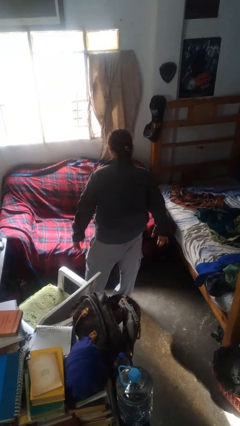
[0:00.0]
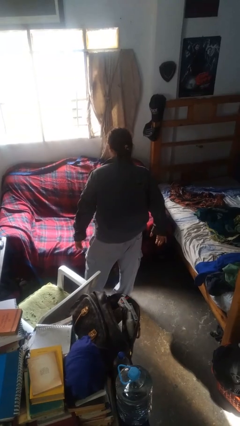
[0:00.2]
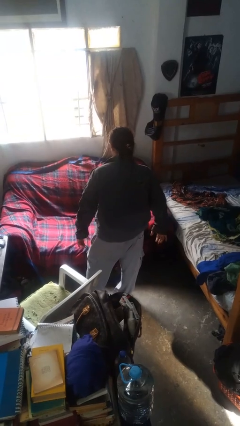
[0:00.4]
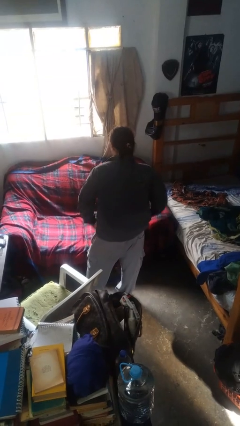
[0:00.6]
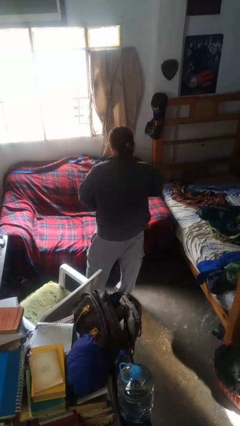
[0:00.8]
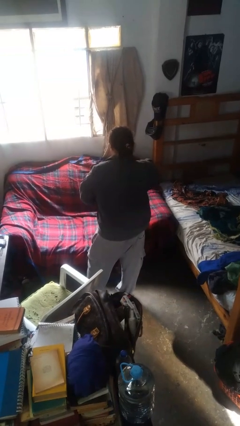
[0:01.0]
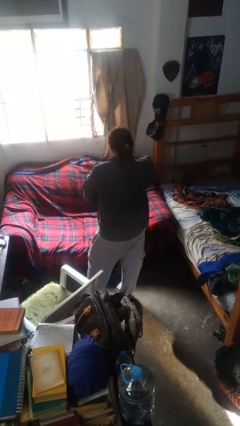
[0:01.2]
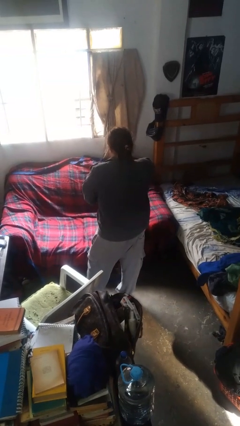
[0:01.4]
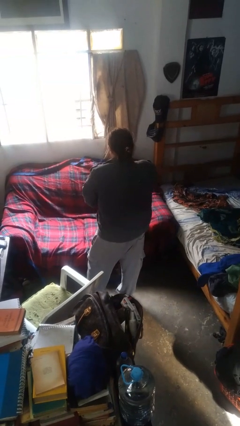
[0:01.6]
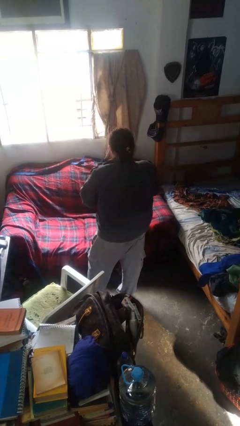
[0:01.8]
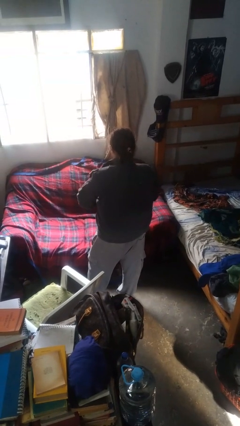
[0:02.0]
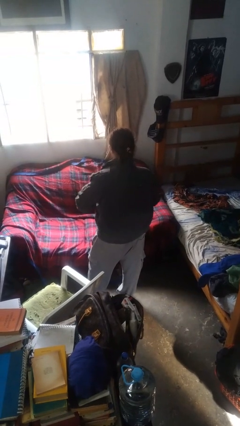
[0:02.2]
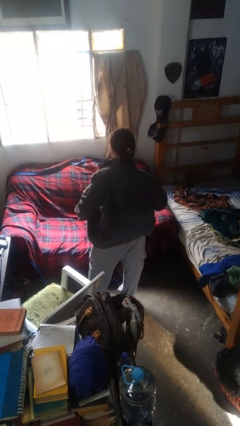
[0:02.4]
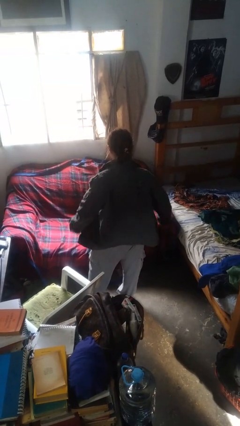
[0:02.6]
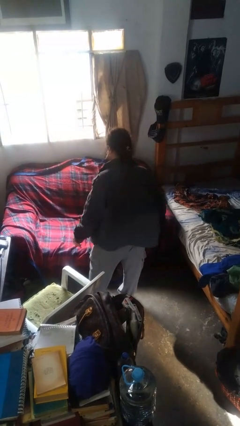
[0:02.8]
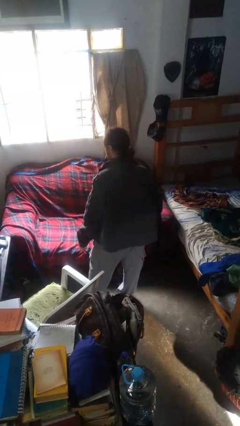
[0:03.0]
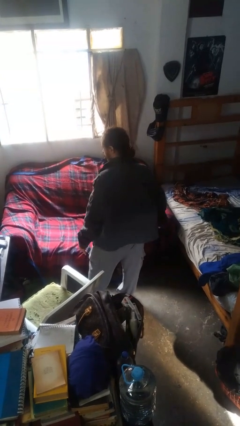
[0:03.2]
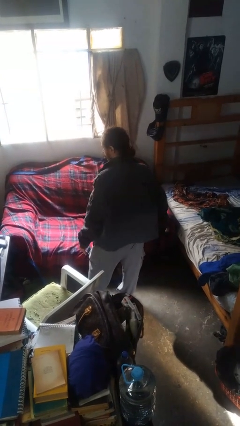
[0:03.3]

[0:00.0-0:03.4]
person unzips jacket

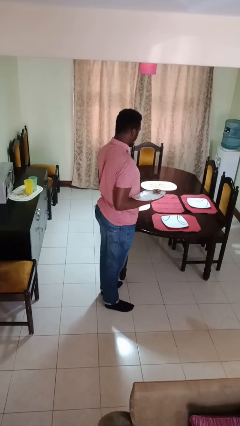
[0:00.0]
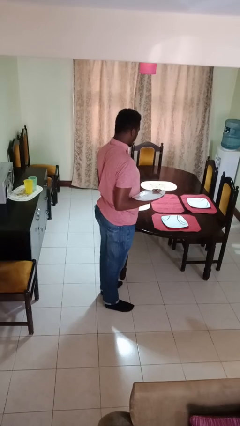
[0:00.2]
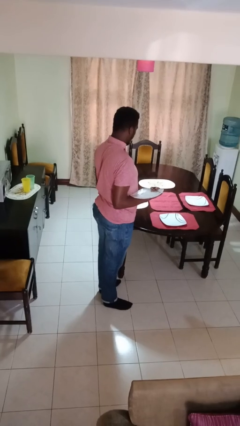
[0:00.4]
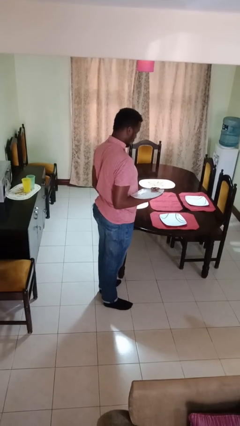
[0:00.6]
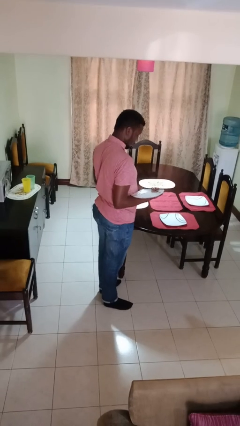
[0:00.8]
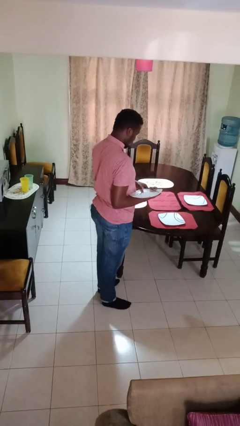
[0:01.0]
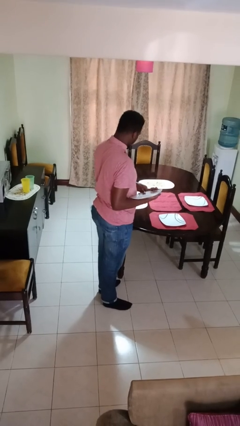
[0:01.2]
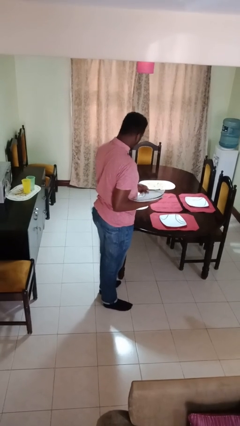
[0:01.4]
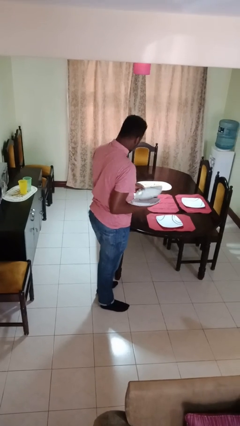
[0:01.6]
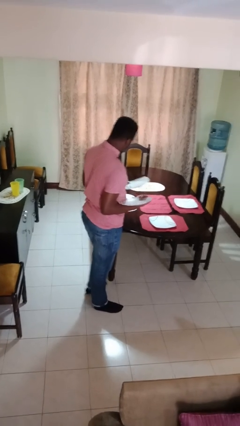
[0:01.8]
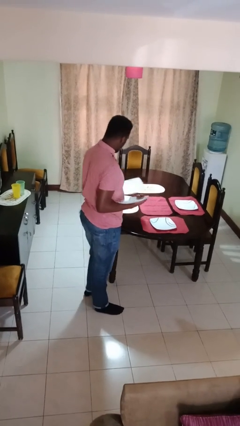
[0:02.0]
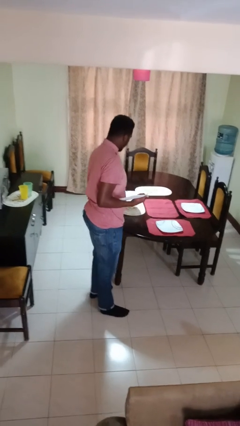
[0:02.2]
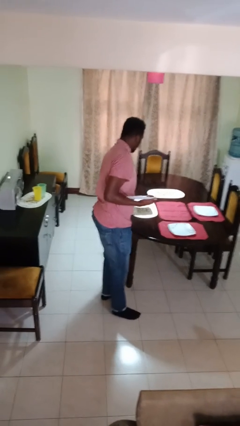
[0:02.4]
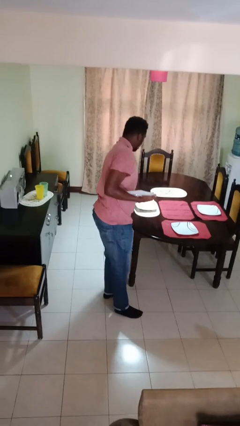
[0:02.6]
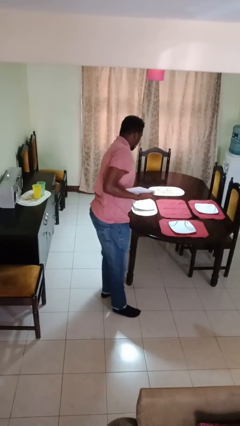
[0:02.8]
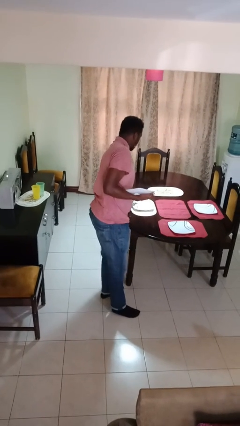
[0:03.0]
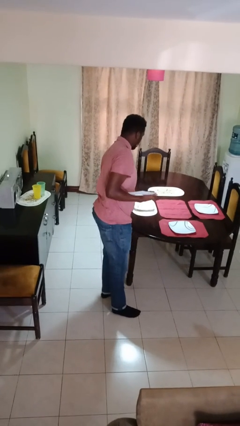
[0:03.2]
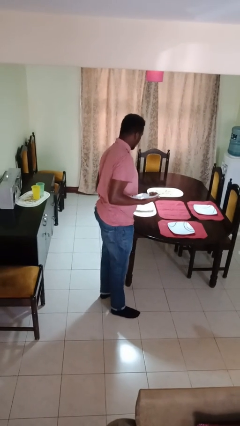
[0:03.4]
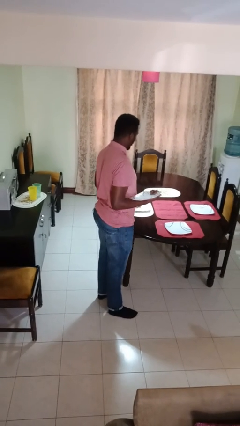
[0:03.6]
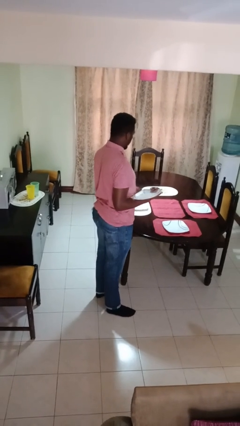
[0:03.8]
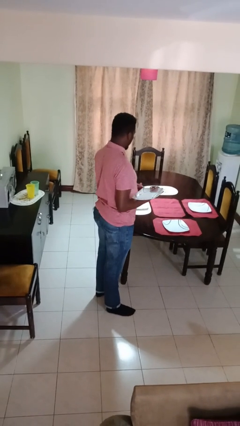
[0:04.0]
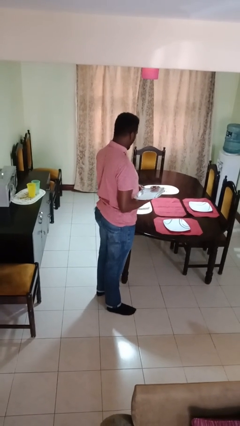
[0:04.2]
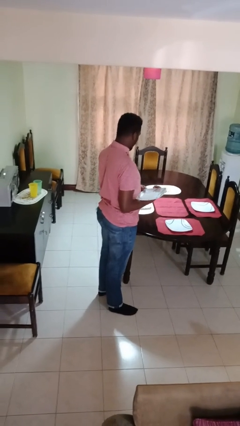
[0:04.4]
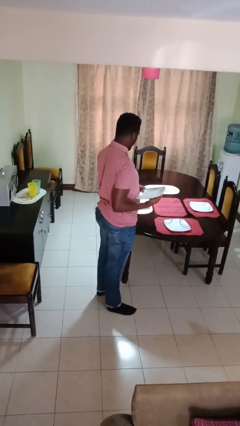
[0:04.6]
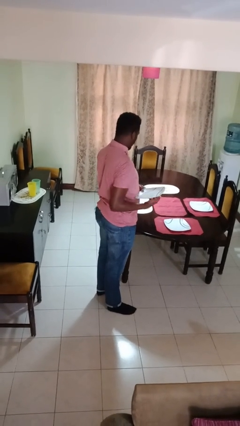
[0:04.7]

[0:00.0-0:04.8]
person sets table

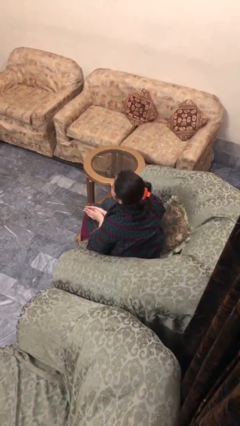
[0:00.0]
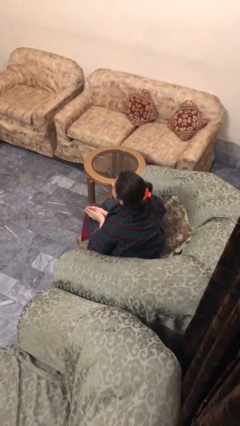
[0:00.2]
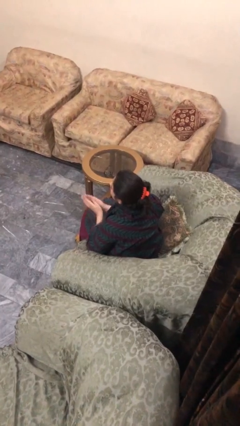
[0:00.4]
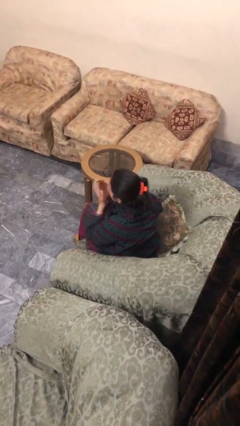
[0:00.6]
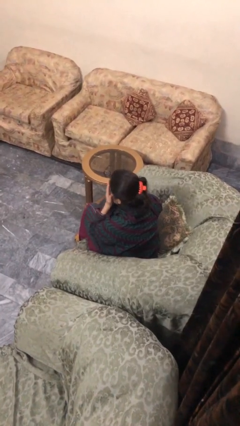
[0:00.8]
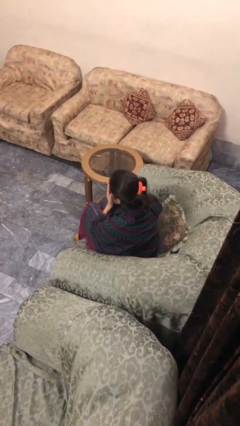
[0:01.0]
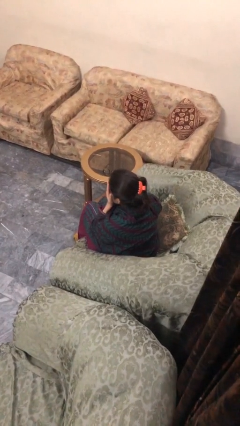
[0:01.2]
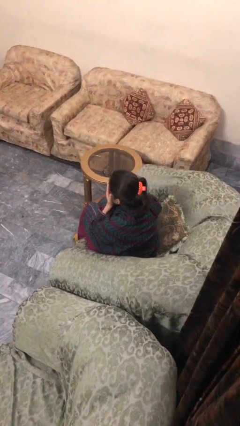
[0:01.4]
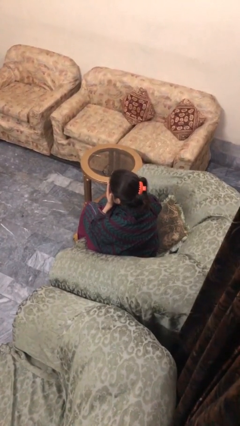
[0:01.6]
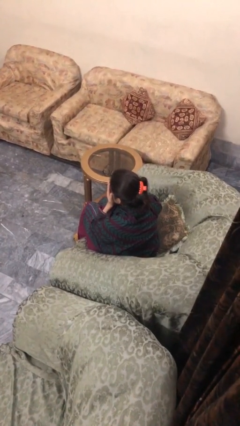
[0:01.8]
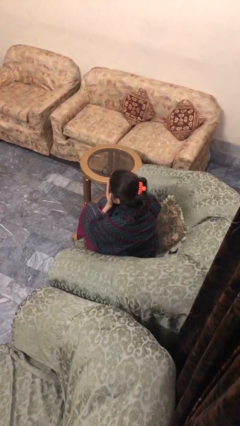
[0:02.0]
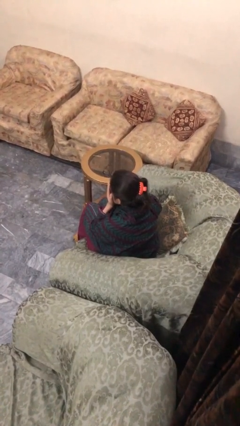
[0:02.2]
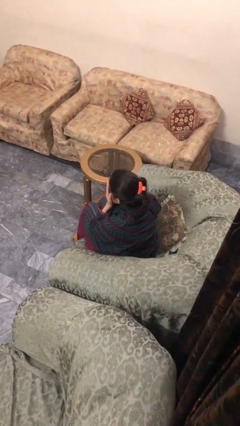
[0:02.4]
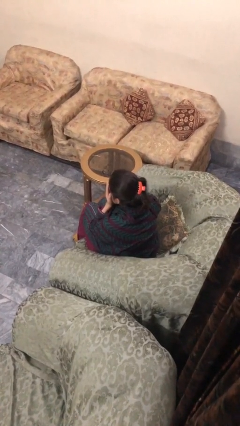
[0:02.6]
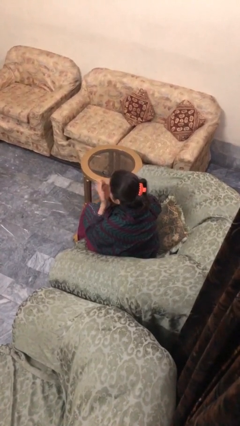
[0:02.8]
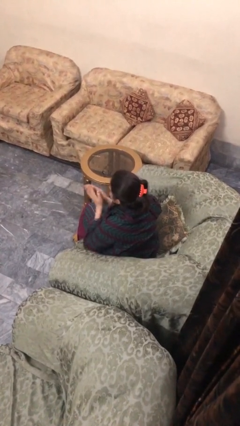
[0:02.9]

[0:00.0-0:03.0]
person covers face with hands

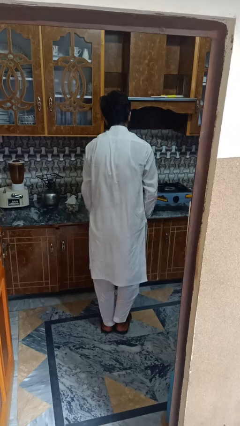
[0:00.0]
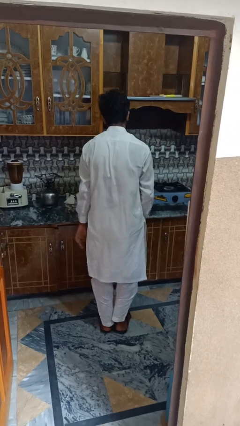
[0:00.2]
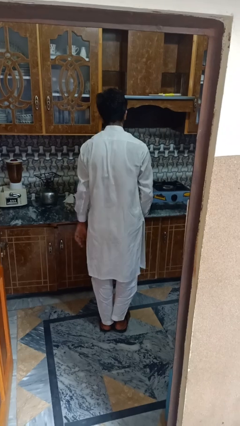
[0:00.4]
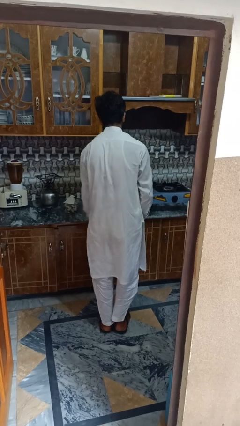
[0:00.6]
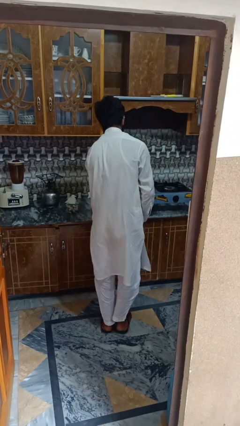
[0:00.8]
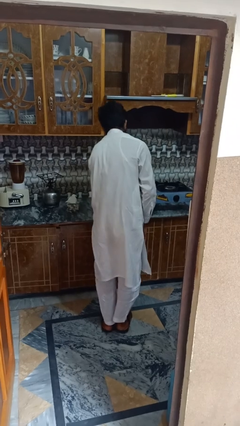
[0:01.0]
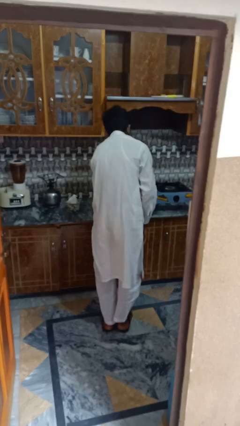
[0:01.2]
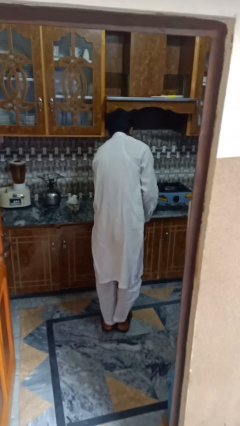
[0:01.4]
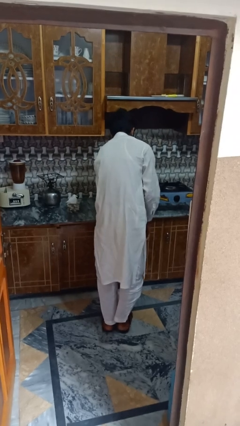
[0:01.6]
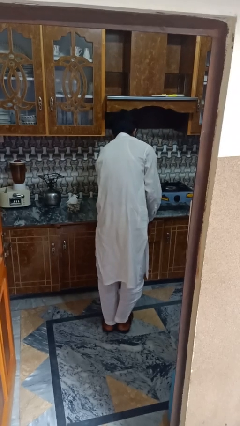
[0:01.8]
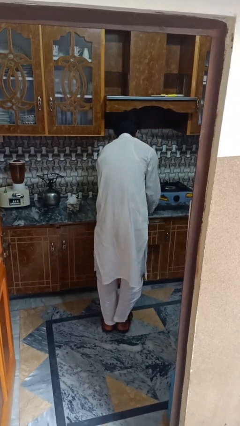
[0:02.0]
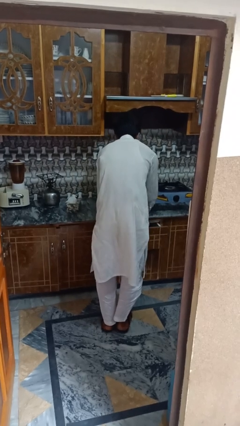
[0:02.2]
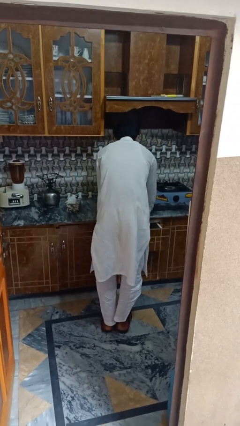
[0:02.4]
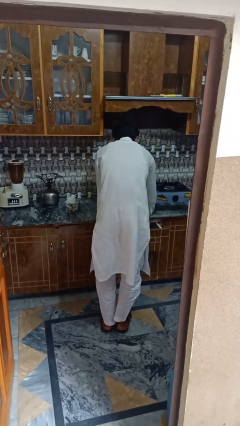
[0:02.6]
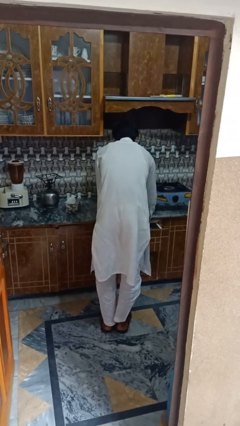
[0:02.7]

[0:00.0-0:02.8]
person searches in kitchen drawer

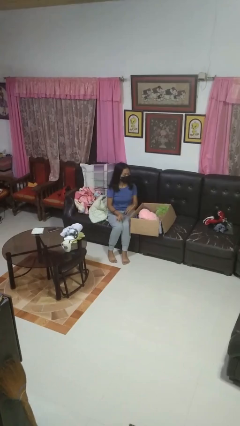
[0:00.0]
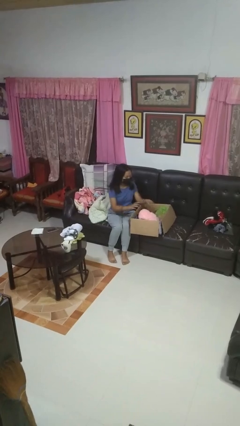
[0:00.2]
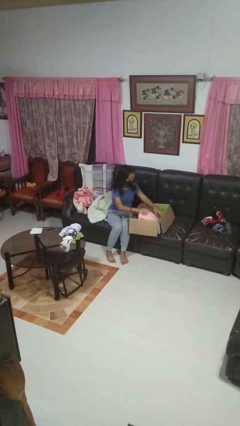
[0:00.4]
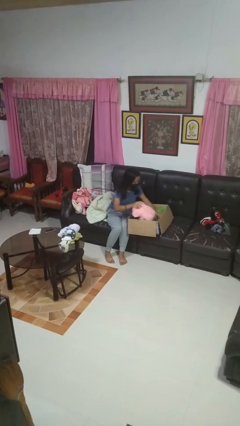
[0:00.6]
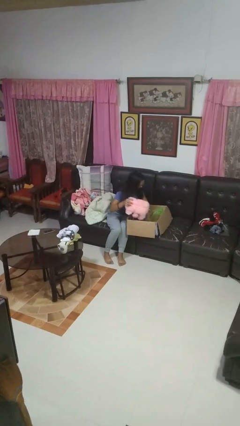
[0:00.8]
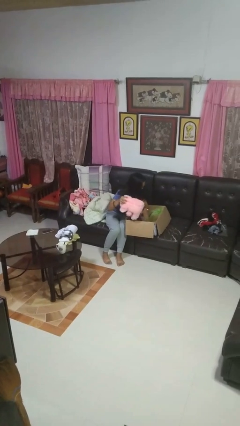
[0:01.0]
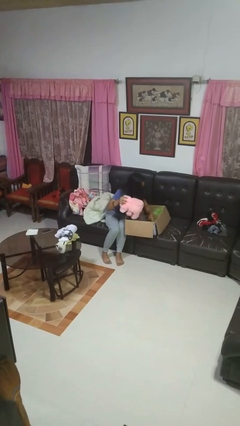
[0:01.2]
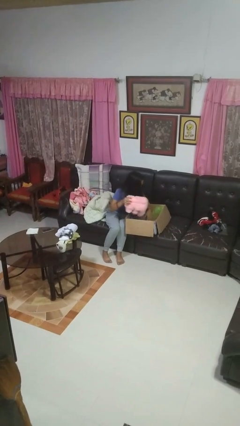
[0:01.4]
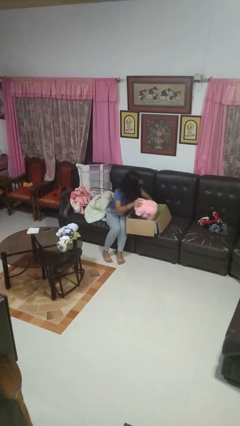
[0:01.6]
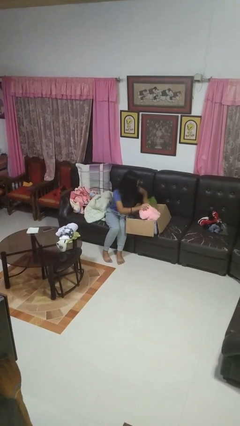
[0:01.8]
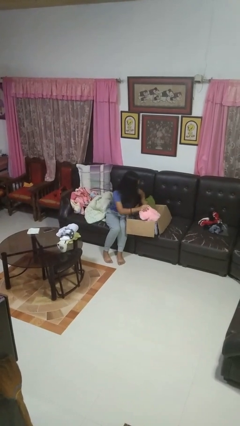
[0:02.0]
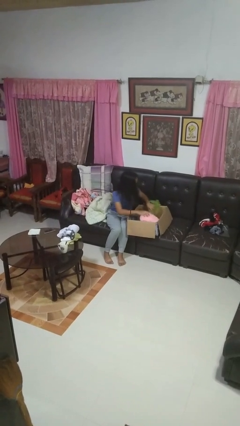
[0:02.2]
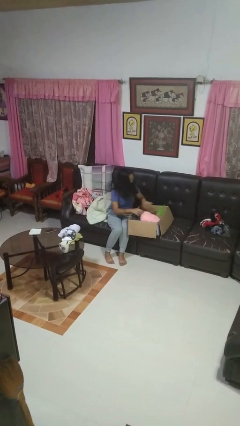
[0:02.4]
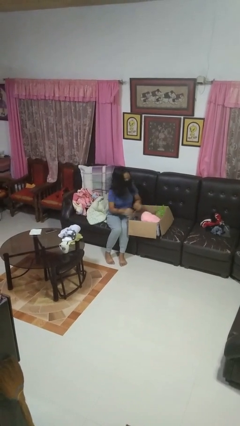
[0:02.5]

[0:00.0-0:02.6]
person searches in box

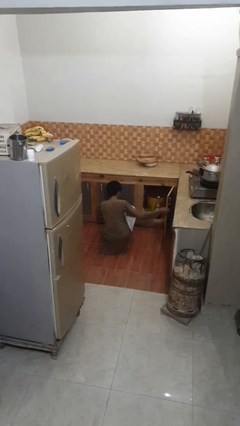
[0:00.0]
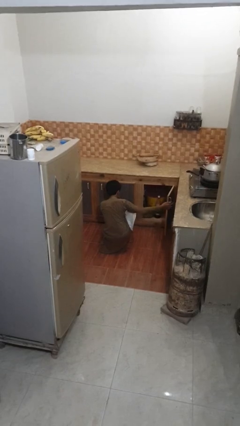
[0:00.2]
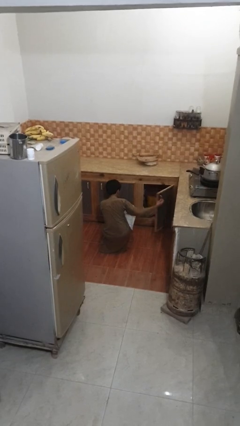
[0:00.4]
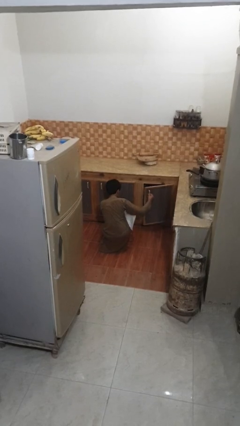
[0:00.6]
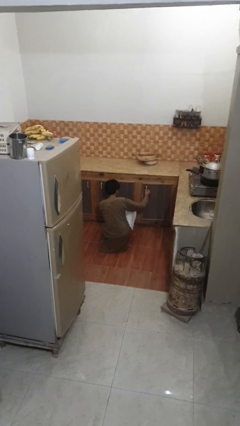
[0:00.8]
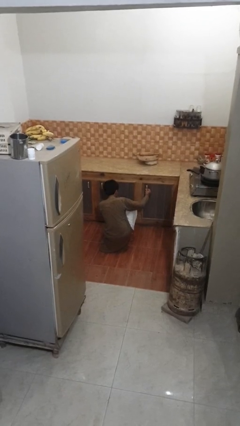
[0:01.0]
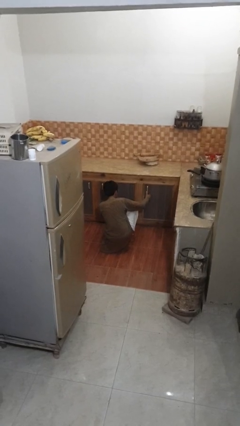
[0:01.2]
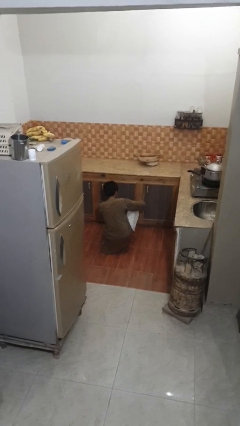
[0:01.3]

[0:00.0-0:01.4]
person closes kitchen drawer
